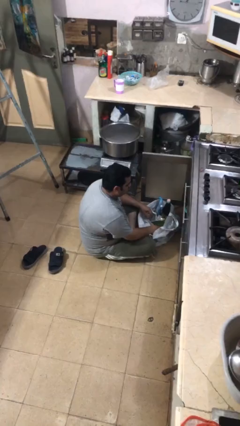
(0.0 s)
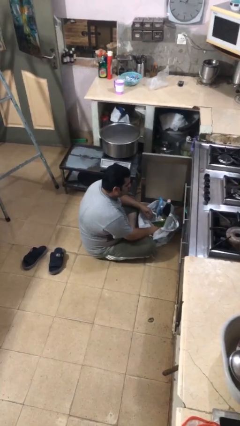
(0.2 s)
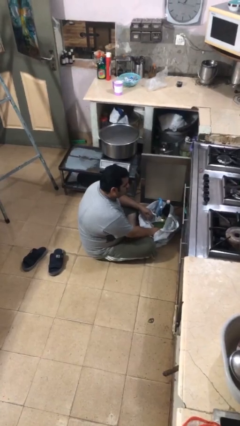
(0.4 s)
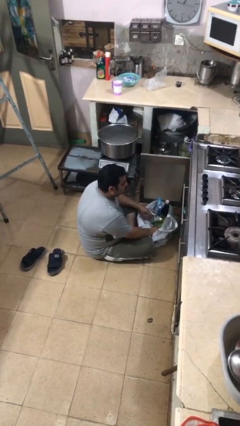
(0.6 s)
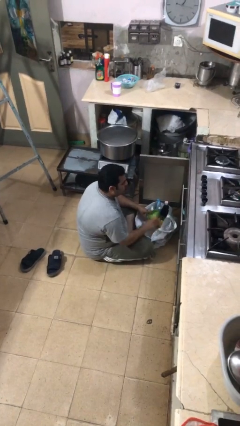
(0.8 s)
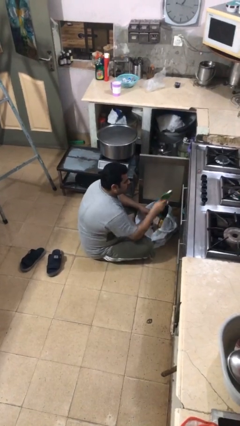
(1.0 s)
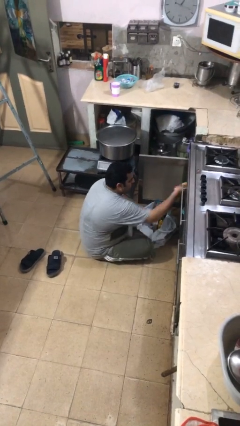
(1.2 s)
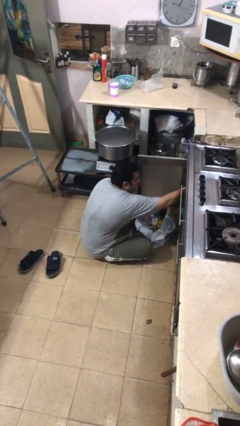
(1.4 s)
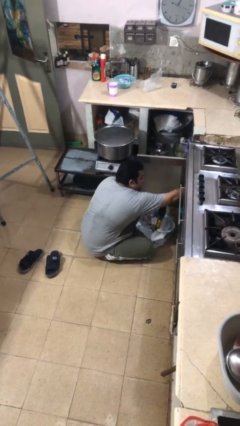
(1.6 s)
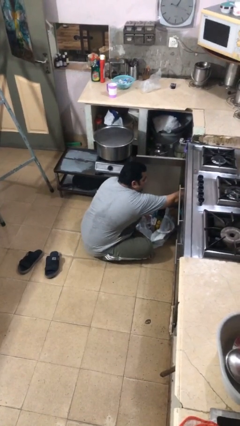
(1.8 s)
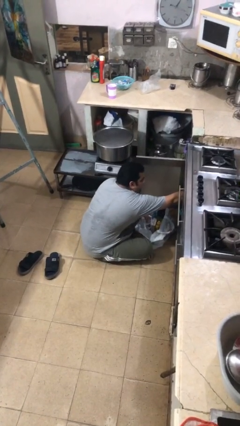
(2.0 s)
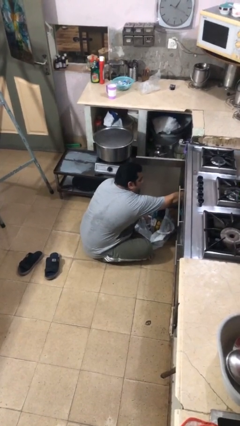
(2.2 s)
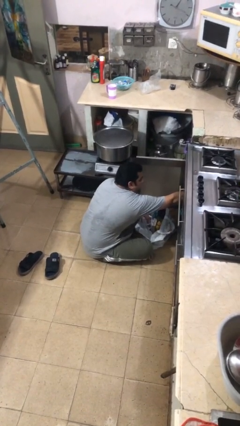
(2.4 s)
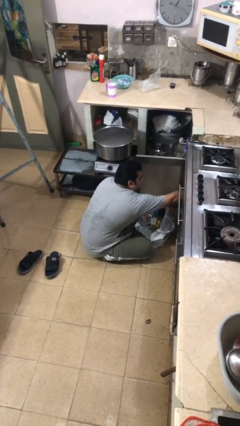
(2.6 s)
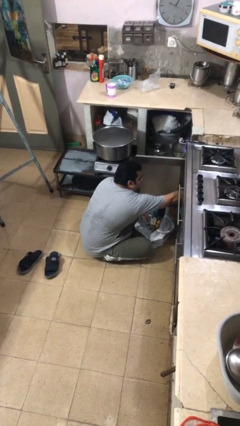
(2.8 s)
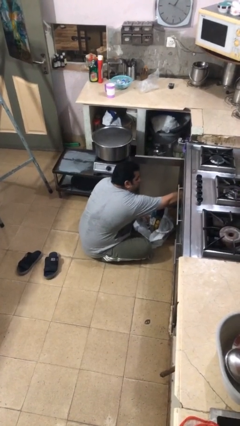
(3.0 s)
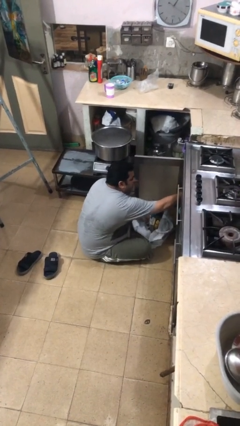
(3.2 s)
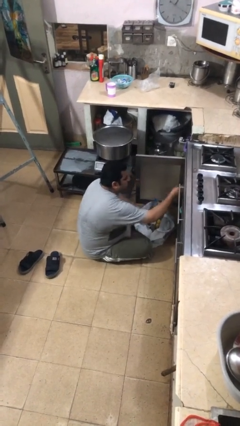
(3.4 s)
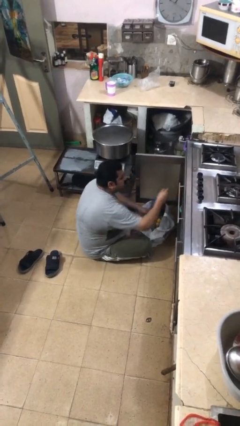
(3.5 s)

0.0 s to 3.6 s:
person loads groceries into cabinet

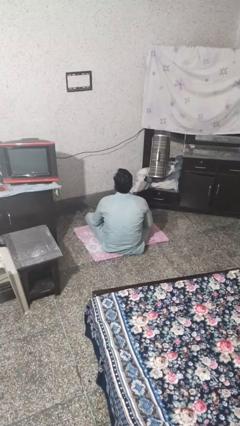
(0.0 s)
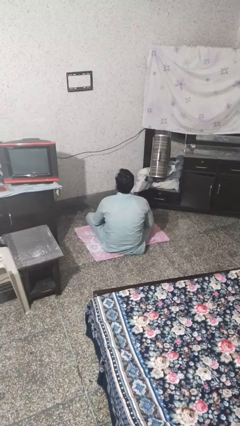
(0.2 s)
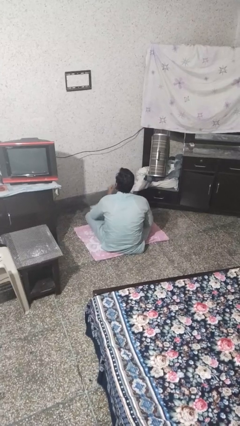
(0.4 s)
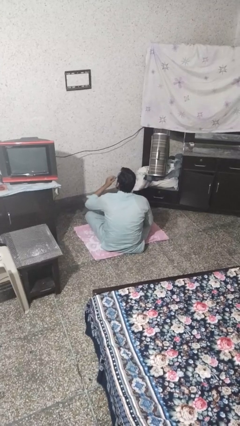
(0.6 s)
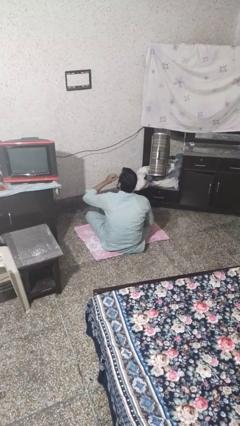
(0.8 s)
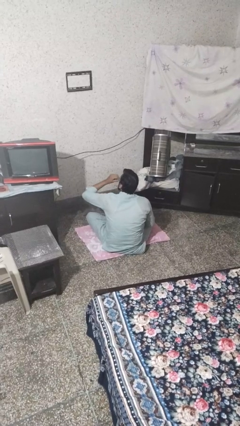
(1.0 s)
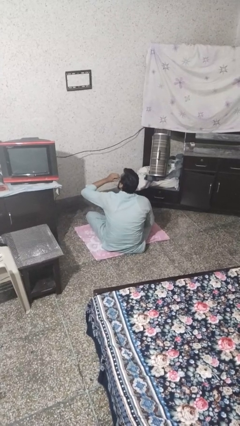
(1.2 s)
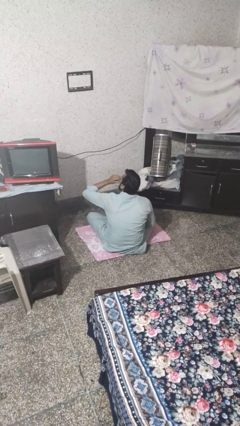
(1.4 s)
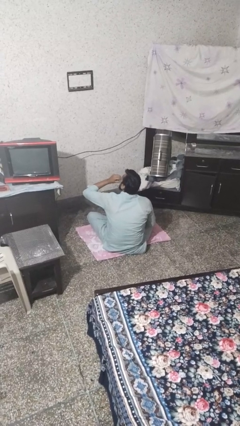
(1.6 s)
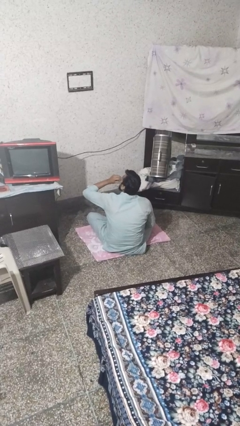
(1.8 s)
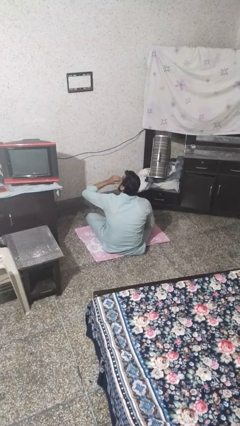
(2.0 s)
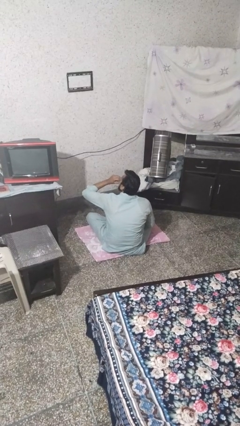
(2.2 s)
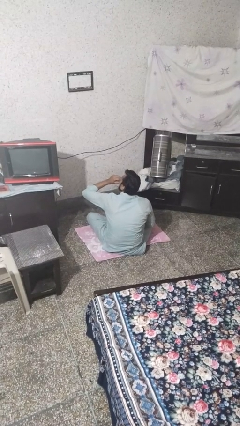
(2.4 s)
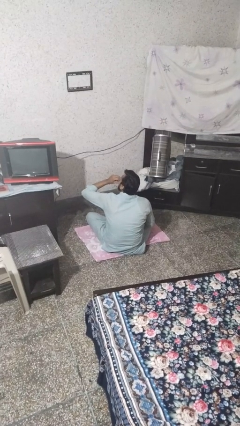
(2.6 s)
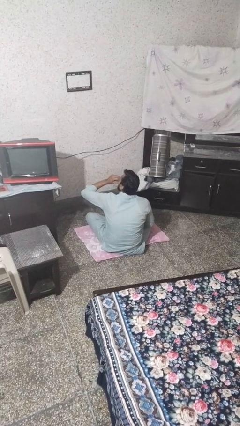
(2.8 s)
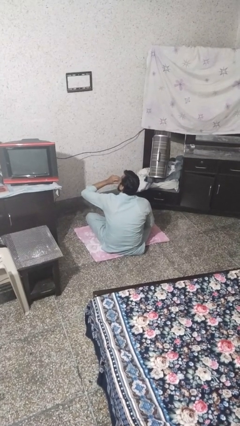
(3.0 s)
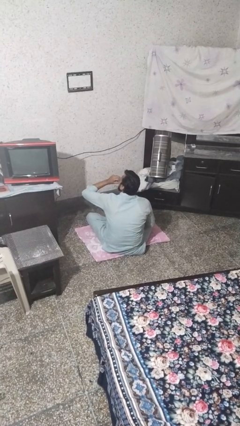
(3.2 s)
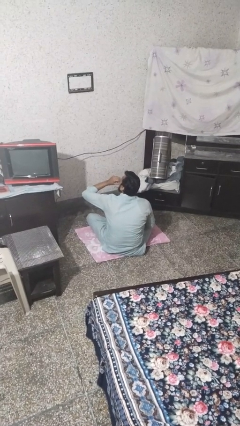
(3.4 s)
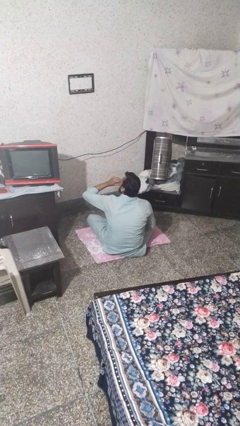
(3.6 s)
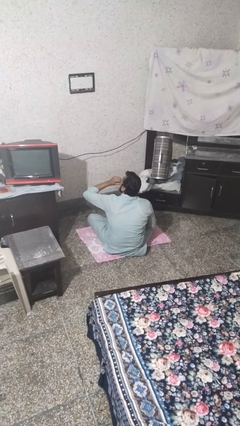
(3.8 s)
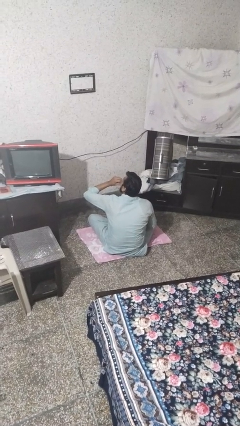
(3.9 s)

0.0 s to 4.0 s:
person vapes

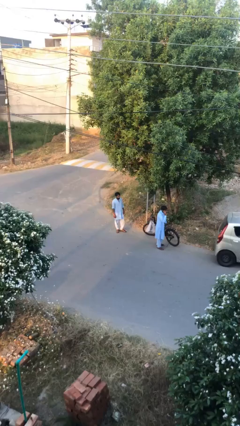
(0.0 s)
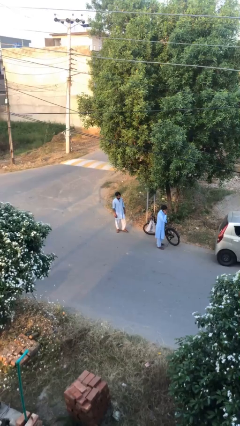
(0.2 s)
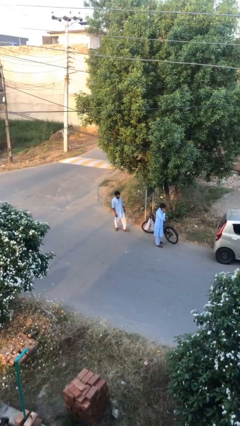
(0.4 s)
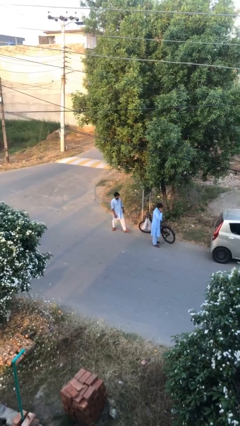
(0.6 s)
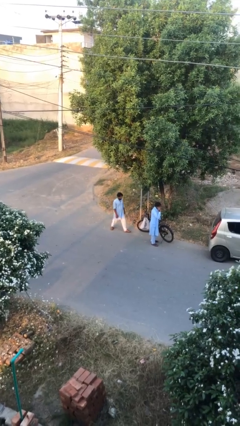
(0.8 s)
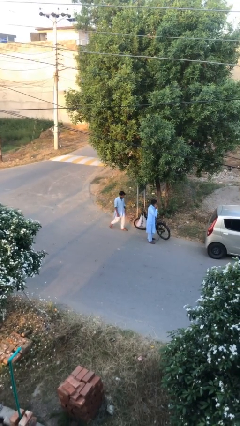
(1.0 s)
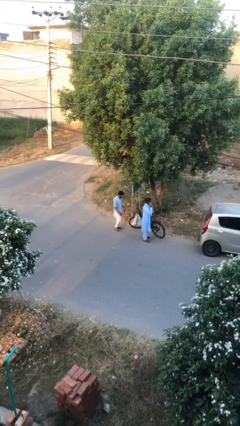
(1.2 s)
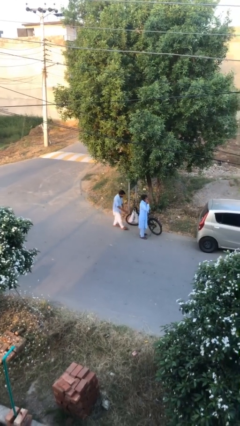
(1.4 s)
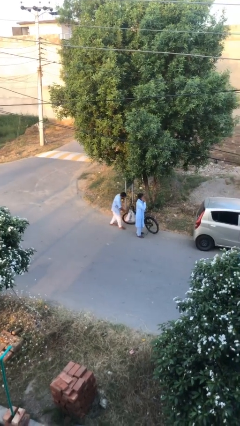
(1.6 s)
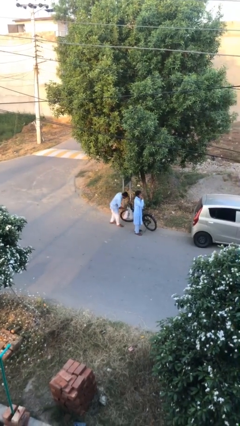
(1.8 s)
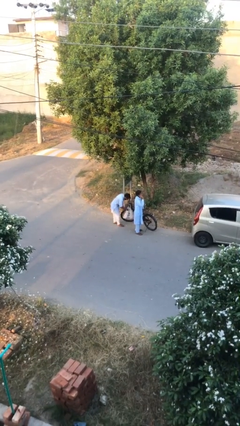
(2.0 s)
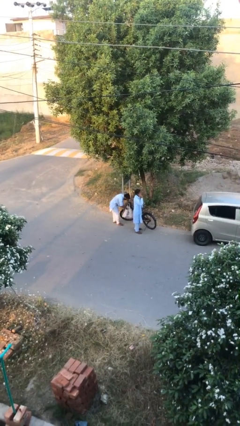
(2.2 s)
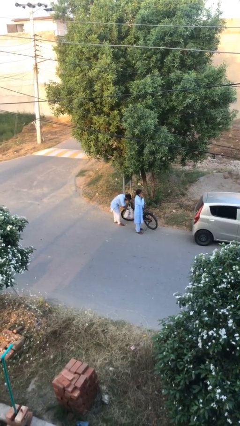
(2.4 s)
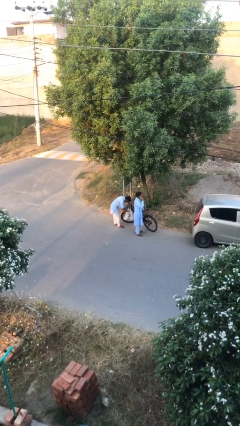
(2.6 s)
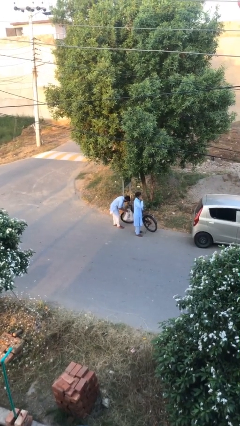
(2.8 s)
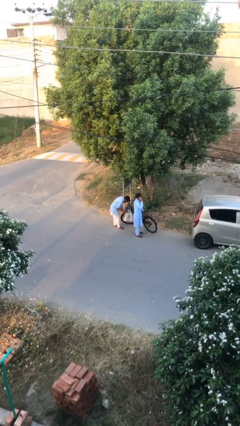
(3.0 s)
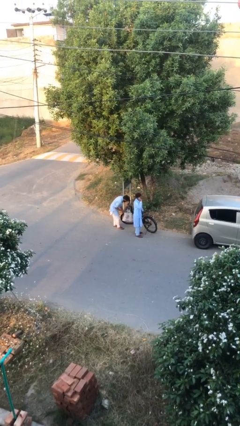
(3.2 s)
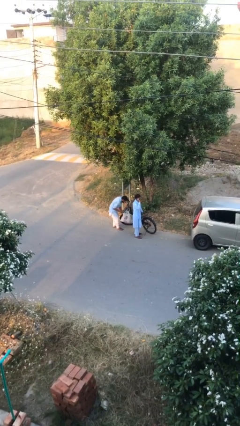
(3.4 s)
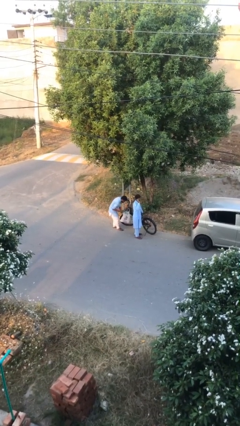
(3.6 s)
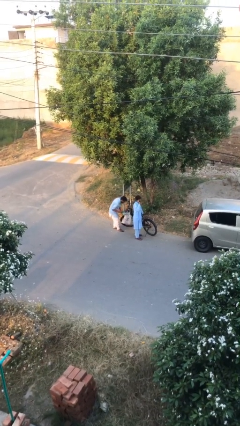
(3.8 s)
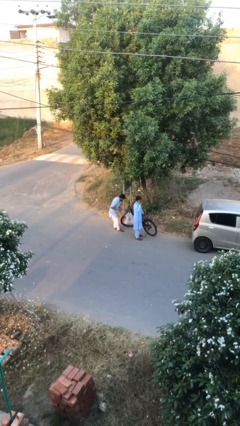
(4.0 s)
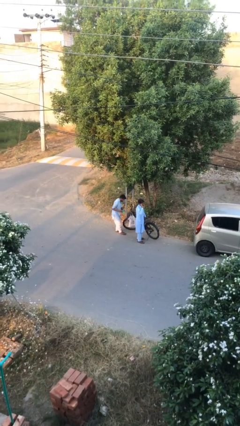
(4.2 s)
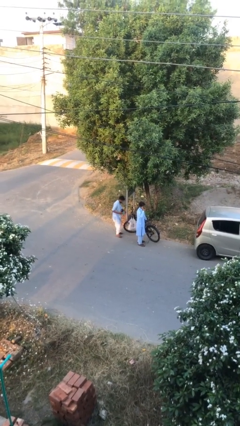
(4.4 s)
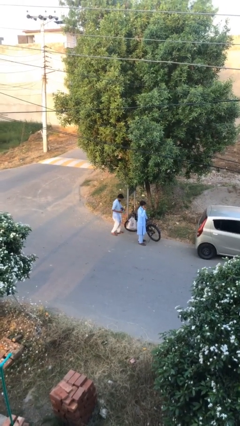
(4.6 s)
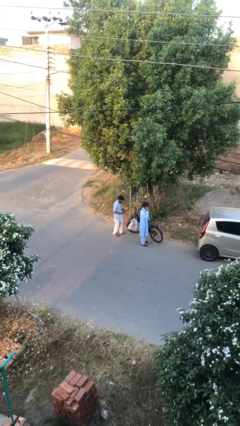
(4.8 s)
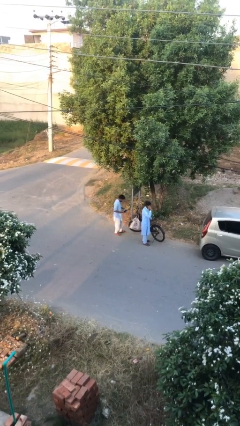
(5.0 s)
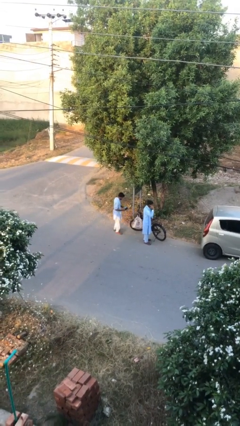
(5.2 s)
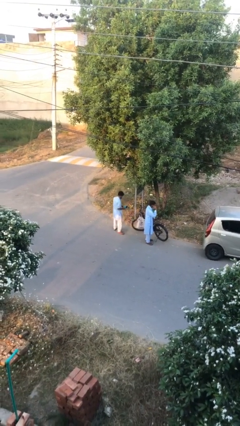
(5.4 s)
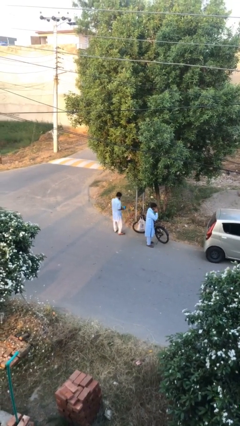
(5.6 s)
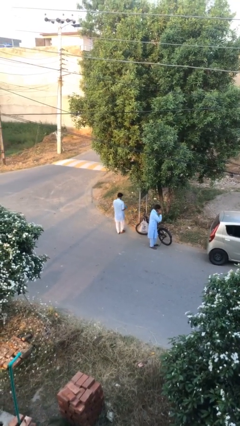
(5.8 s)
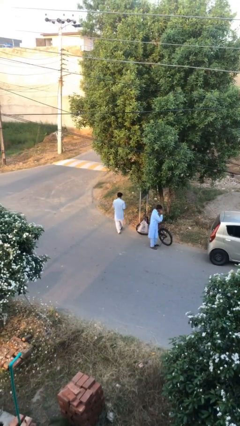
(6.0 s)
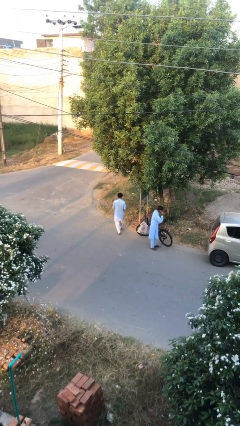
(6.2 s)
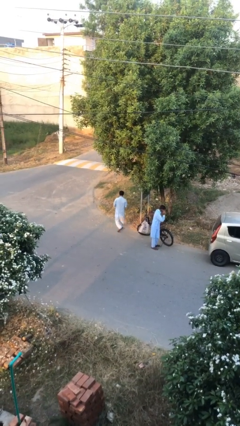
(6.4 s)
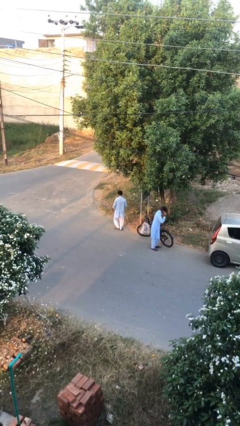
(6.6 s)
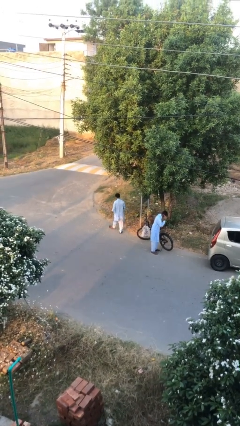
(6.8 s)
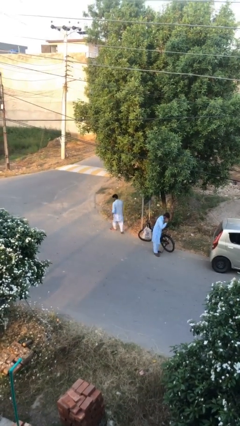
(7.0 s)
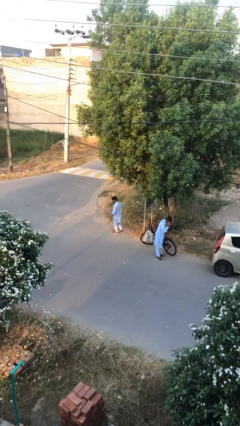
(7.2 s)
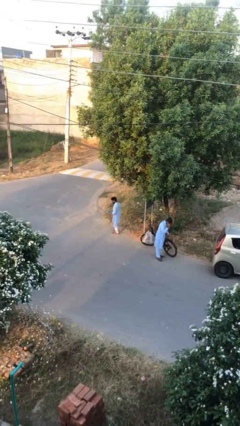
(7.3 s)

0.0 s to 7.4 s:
person steals object from person

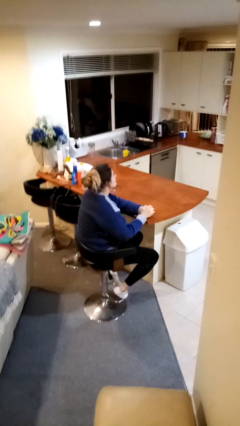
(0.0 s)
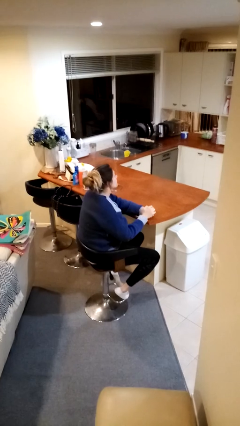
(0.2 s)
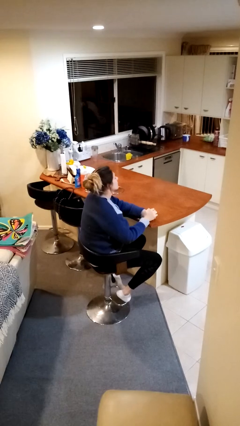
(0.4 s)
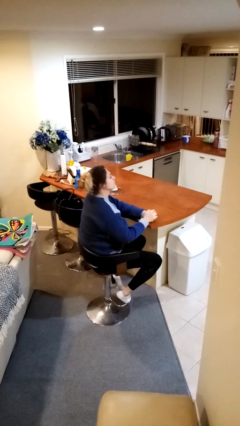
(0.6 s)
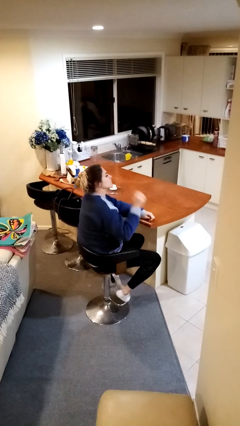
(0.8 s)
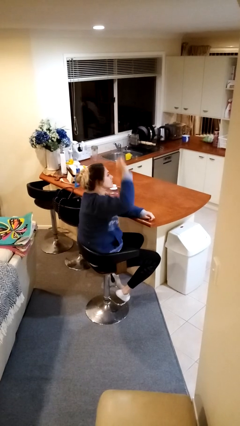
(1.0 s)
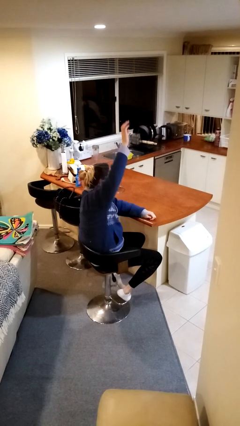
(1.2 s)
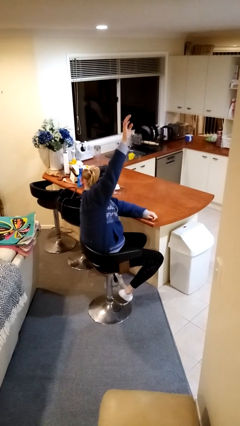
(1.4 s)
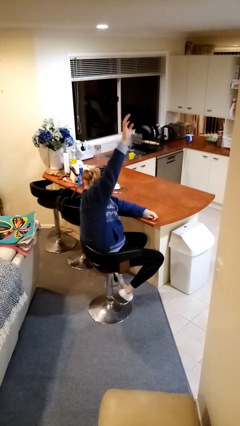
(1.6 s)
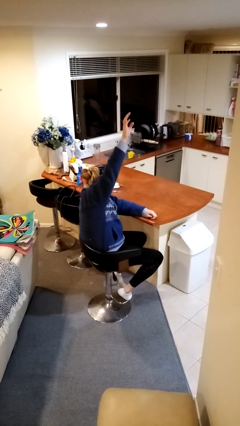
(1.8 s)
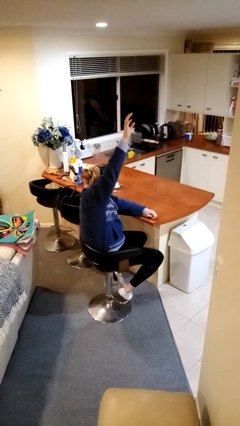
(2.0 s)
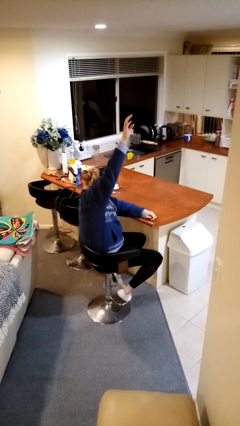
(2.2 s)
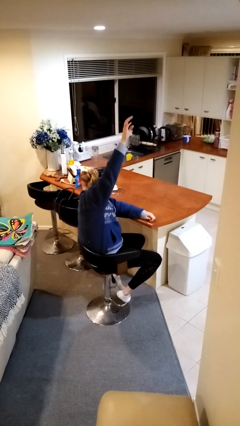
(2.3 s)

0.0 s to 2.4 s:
person gestures raise hand

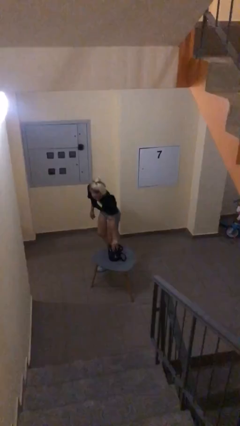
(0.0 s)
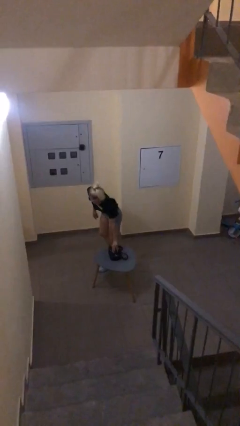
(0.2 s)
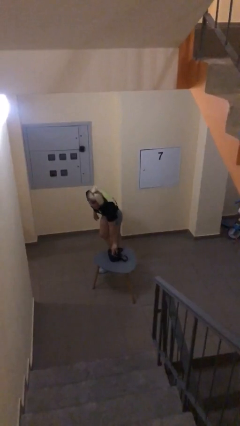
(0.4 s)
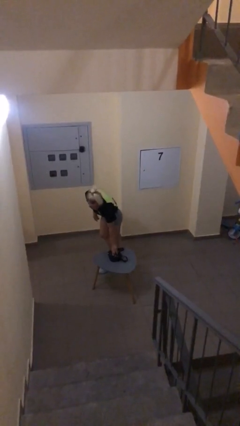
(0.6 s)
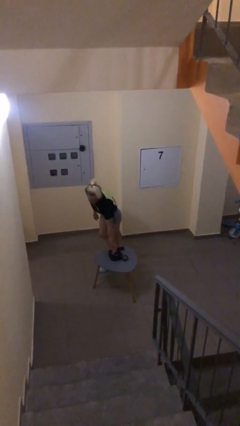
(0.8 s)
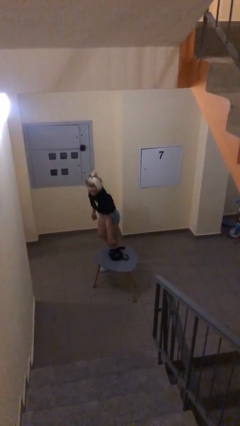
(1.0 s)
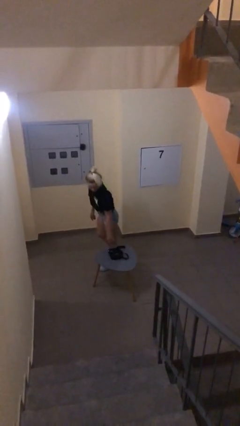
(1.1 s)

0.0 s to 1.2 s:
person puts down object on table
